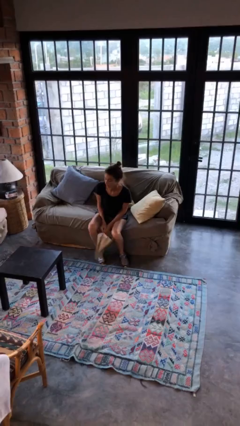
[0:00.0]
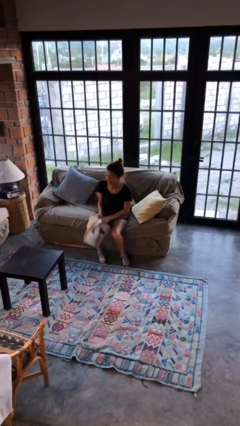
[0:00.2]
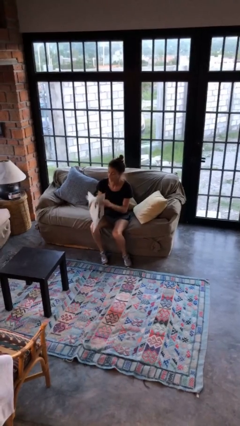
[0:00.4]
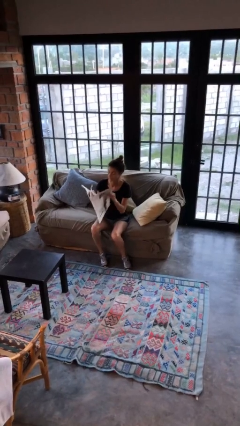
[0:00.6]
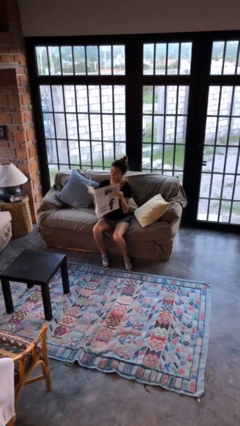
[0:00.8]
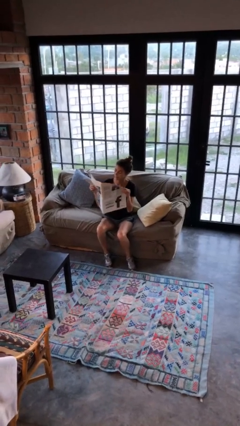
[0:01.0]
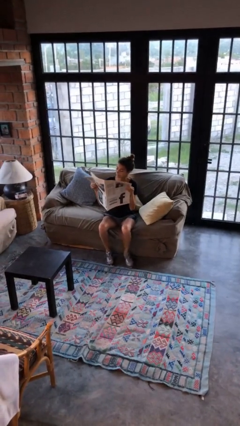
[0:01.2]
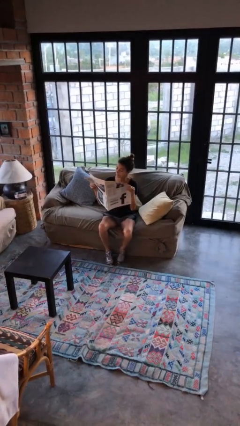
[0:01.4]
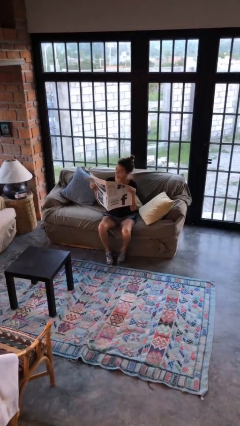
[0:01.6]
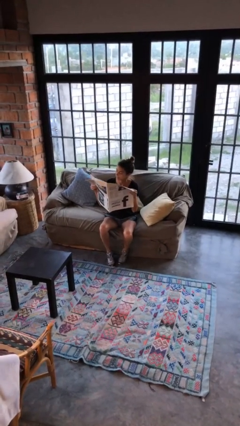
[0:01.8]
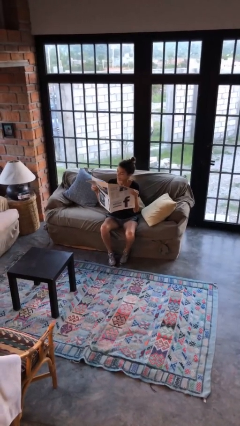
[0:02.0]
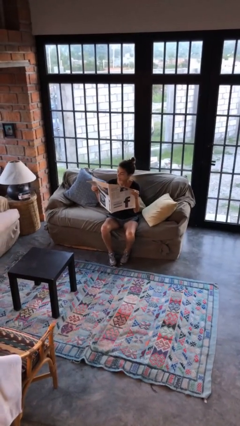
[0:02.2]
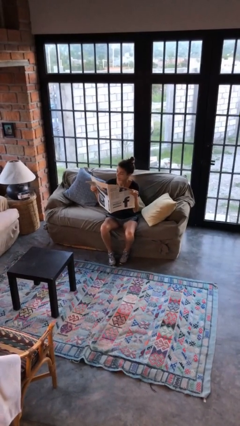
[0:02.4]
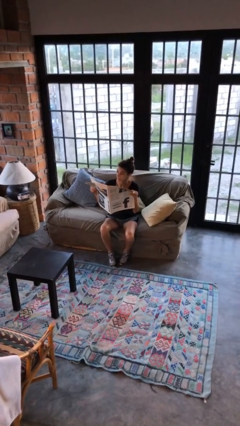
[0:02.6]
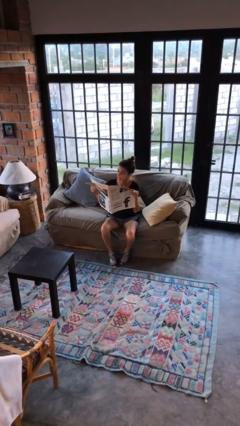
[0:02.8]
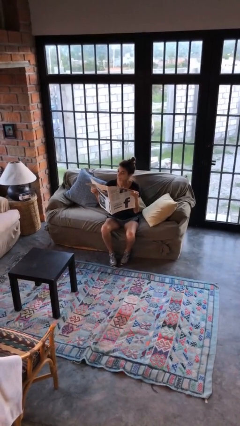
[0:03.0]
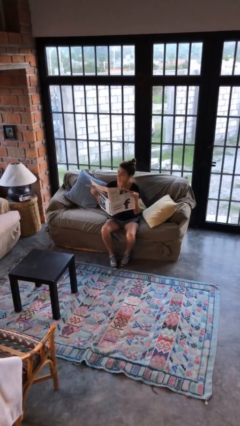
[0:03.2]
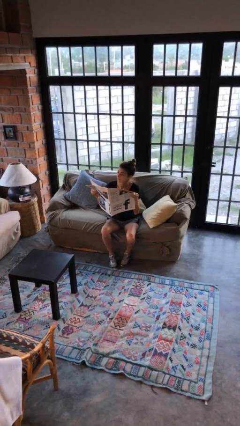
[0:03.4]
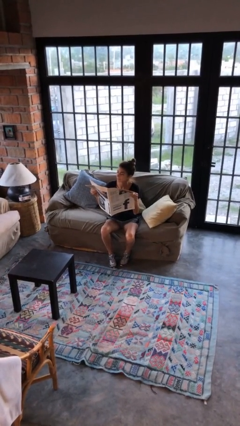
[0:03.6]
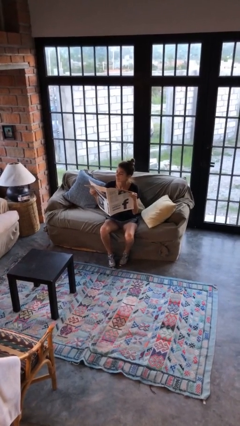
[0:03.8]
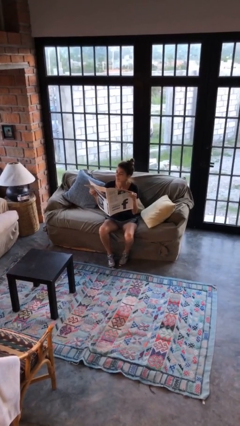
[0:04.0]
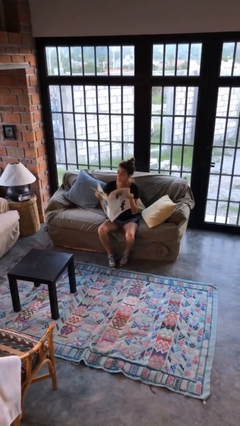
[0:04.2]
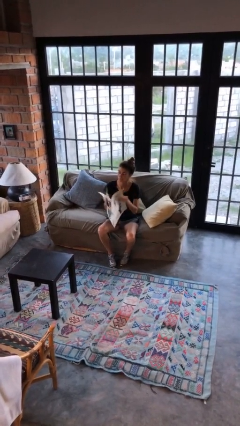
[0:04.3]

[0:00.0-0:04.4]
person reads newspaper

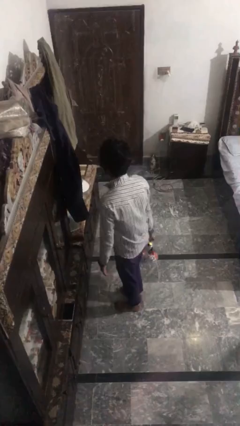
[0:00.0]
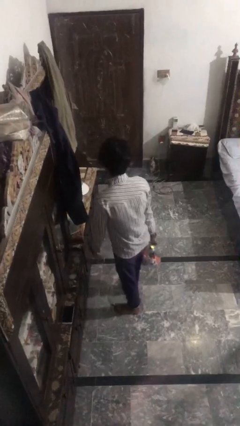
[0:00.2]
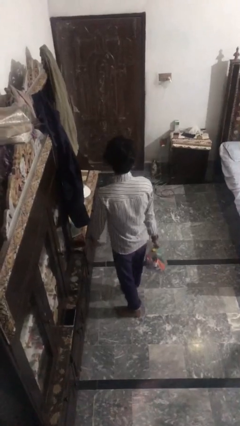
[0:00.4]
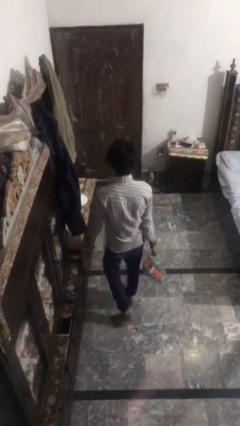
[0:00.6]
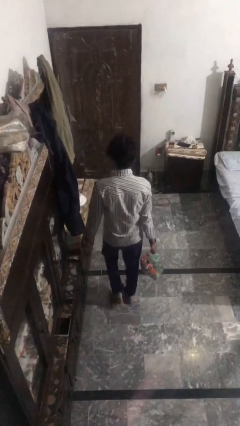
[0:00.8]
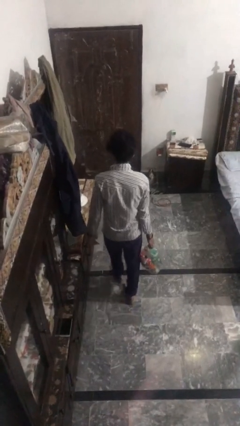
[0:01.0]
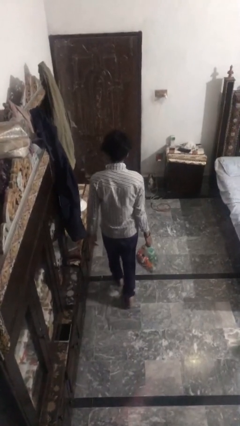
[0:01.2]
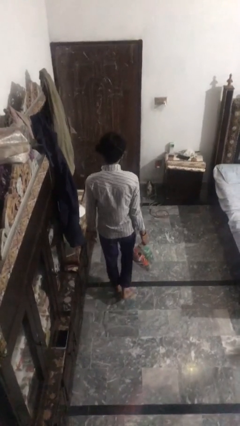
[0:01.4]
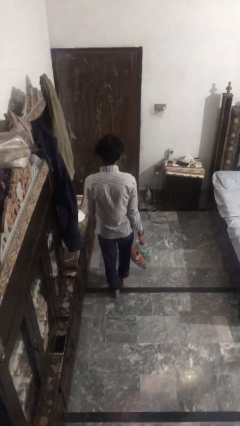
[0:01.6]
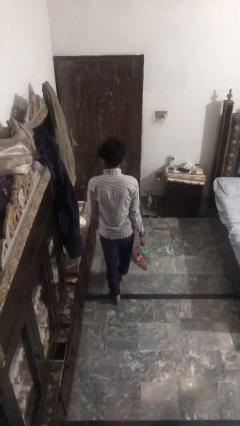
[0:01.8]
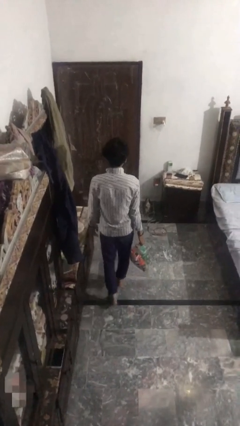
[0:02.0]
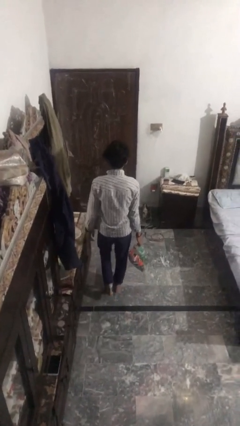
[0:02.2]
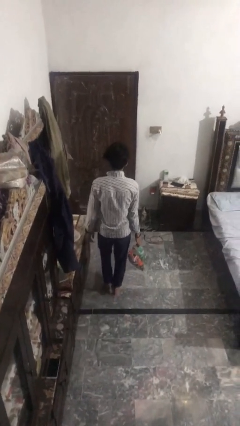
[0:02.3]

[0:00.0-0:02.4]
person carries groceries

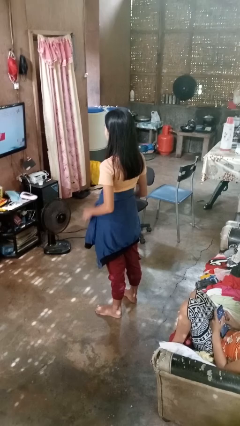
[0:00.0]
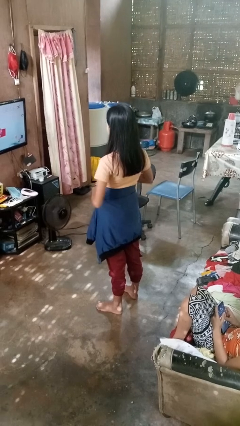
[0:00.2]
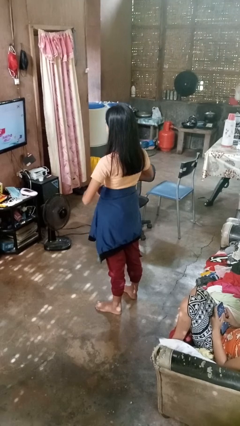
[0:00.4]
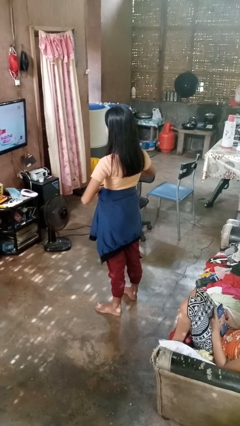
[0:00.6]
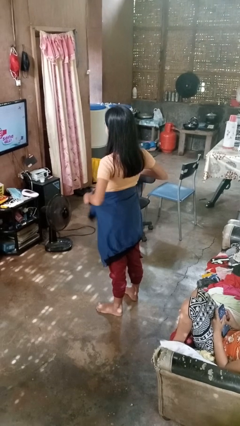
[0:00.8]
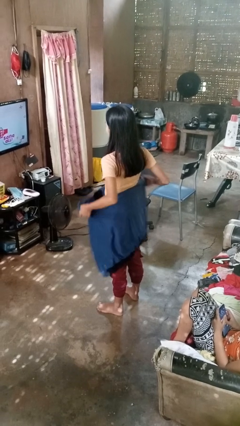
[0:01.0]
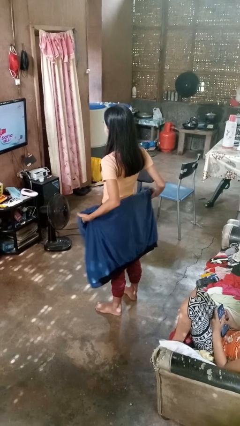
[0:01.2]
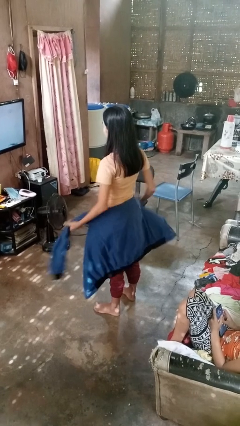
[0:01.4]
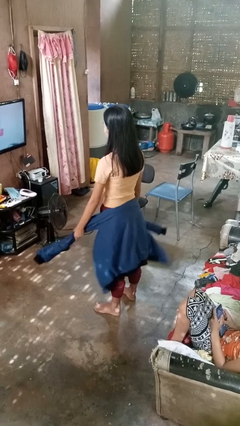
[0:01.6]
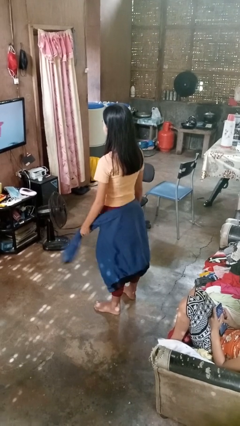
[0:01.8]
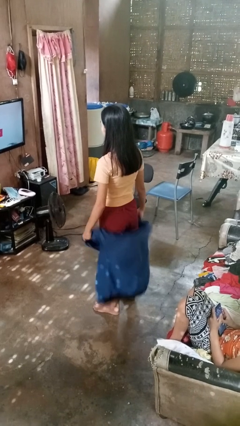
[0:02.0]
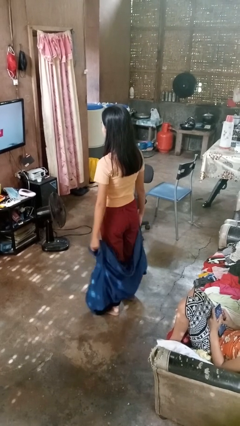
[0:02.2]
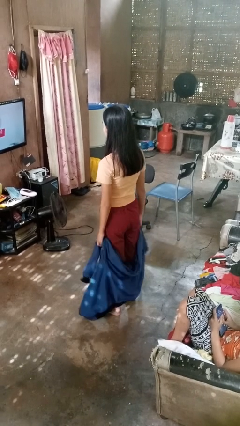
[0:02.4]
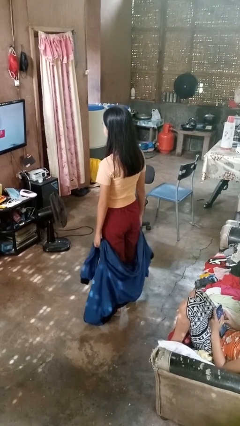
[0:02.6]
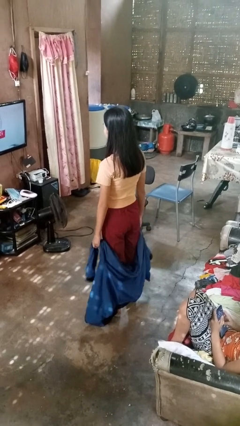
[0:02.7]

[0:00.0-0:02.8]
person unties jacket around waist

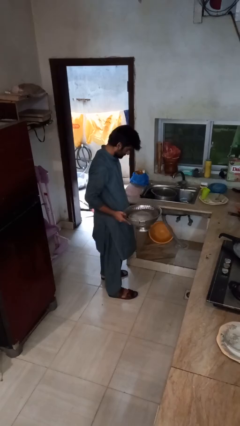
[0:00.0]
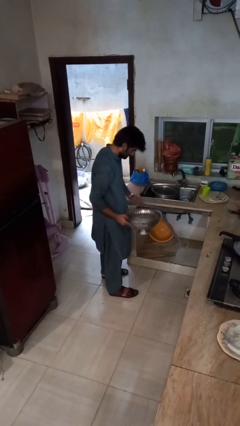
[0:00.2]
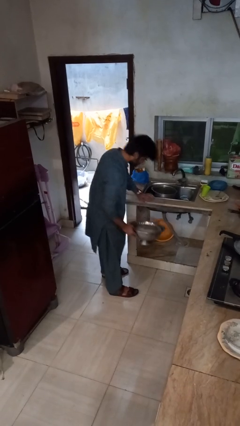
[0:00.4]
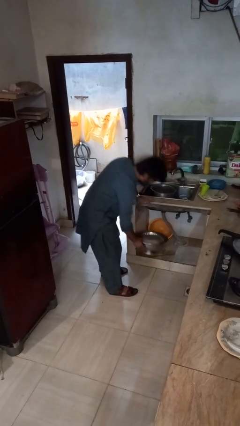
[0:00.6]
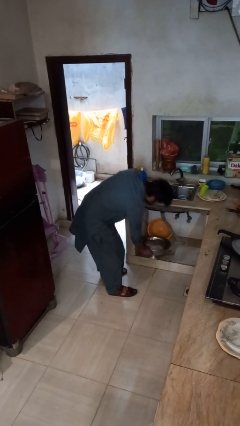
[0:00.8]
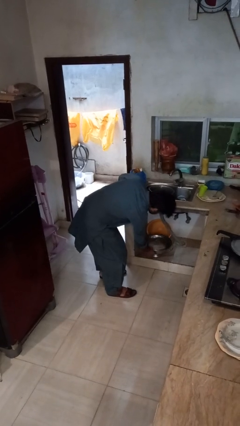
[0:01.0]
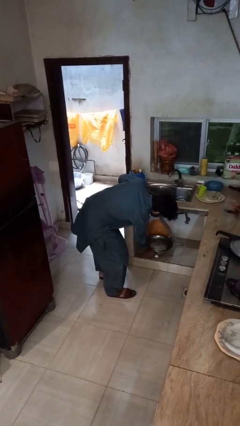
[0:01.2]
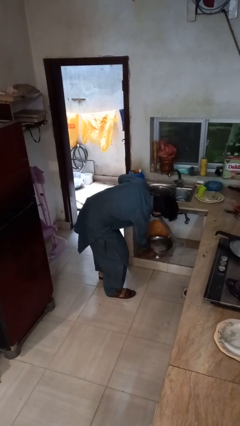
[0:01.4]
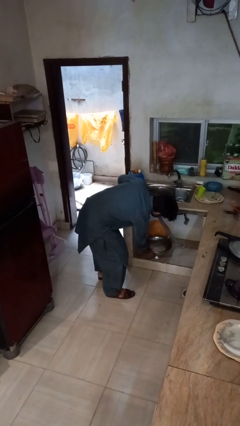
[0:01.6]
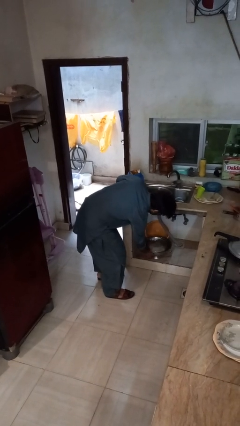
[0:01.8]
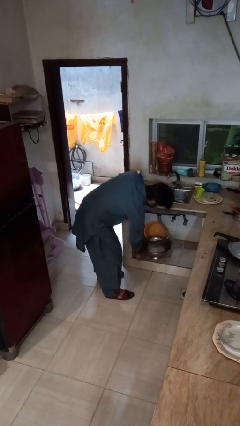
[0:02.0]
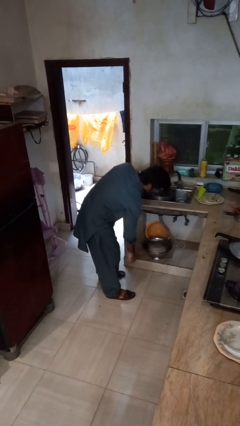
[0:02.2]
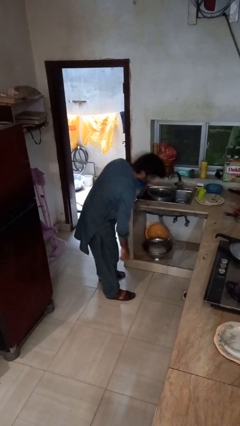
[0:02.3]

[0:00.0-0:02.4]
person puts down object into cabinet

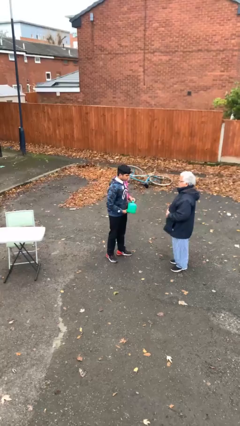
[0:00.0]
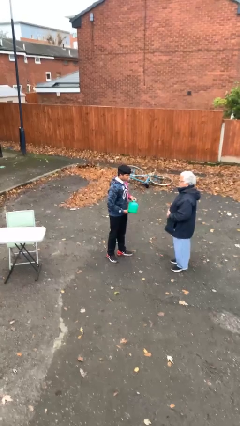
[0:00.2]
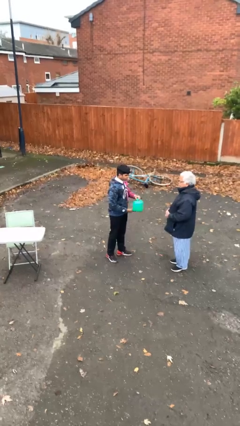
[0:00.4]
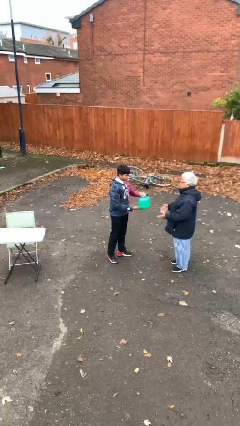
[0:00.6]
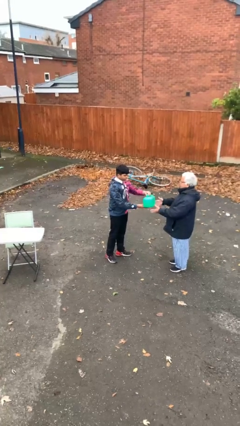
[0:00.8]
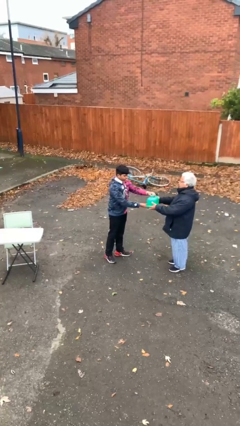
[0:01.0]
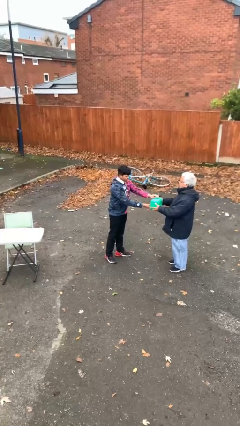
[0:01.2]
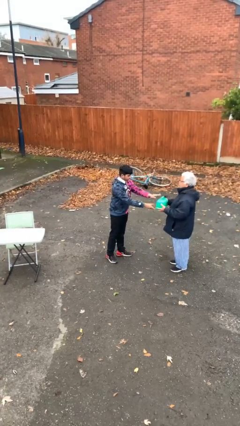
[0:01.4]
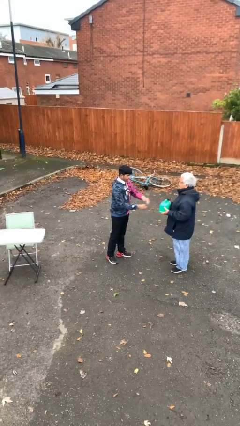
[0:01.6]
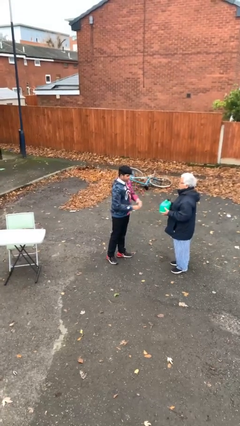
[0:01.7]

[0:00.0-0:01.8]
person transfers object to person

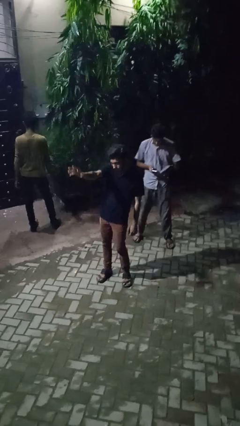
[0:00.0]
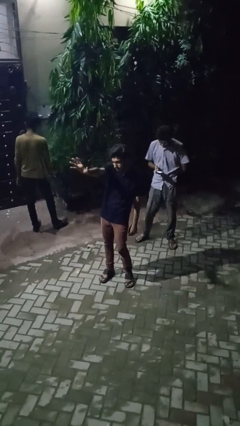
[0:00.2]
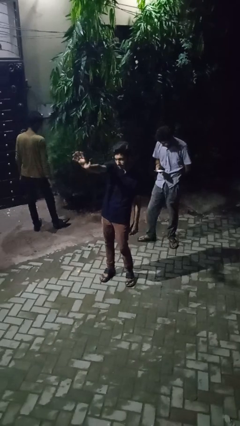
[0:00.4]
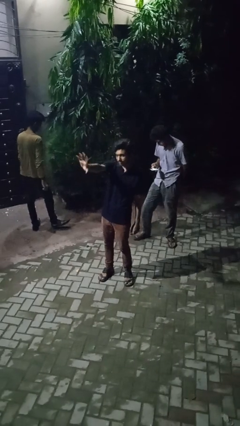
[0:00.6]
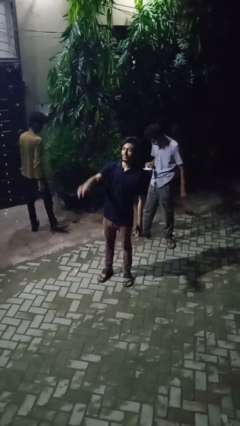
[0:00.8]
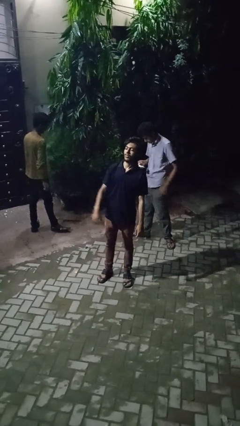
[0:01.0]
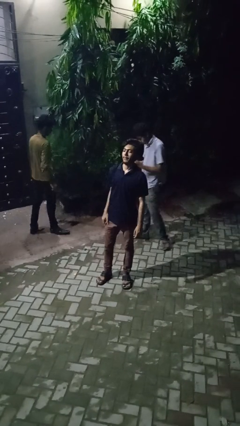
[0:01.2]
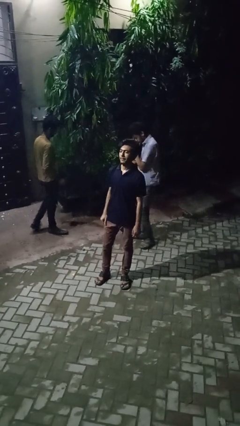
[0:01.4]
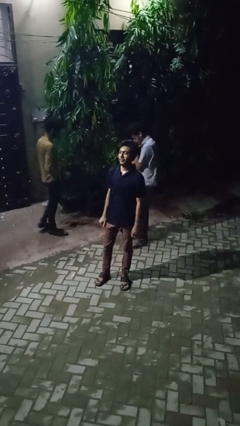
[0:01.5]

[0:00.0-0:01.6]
person waves at person

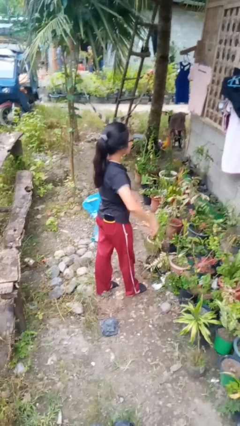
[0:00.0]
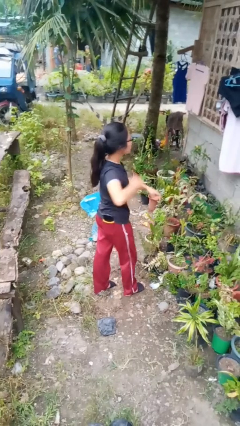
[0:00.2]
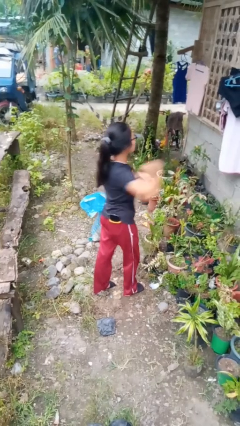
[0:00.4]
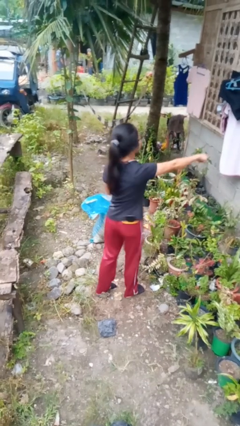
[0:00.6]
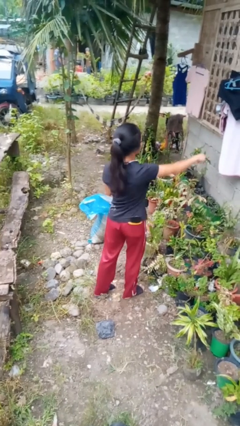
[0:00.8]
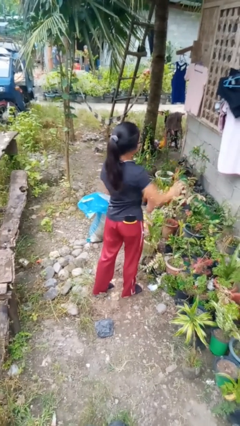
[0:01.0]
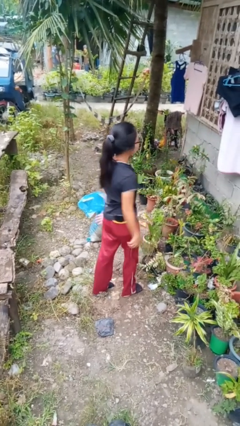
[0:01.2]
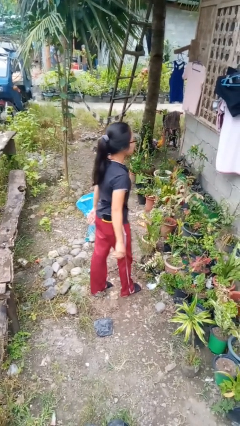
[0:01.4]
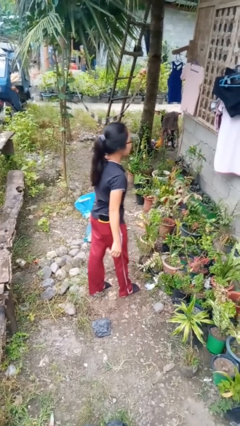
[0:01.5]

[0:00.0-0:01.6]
person punches

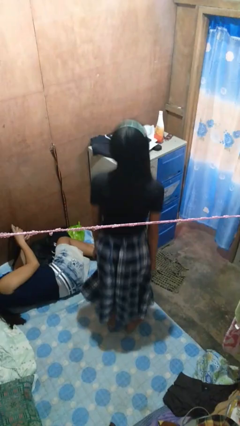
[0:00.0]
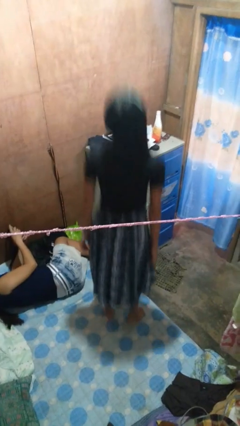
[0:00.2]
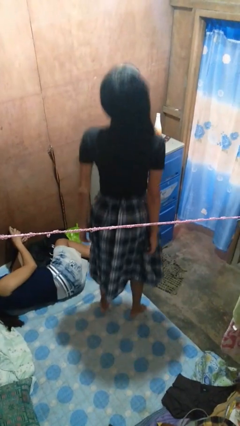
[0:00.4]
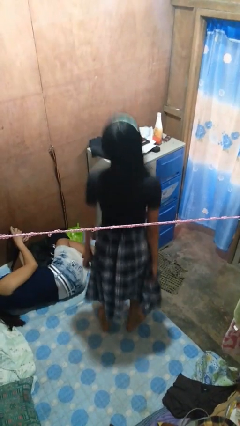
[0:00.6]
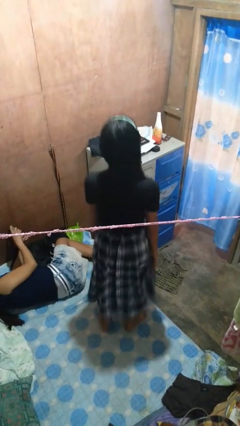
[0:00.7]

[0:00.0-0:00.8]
person jumps on bed
